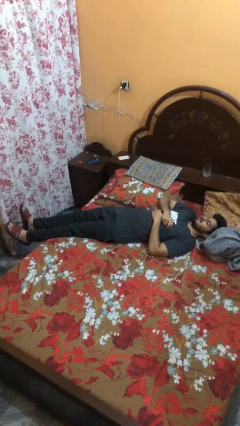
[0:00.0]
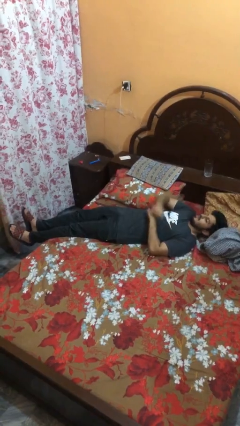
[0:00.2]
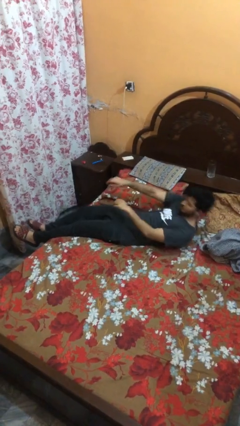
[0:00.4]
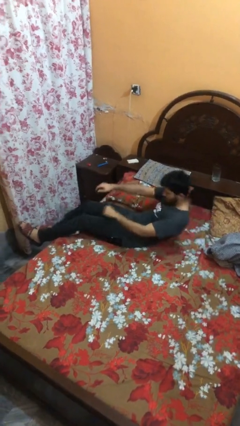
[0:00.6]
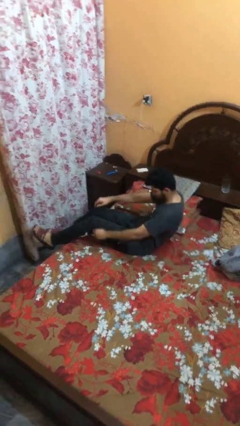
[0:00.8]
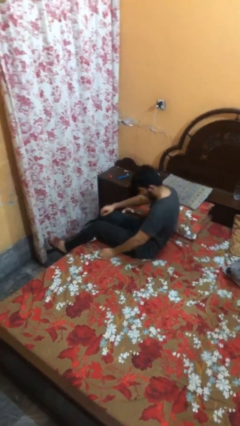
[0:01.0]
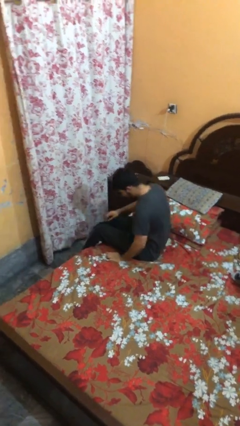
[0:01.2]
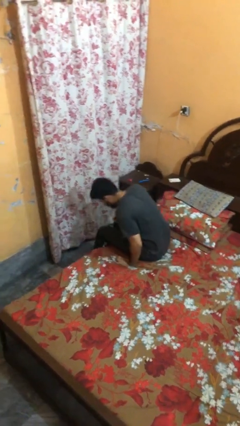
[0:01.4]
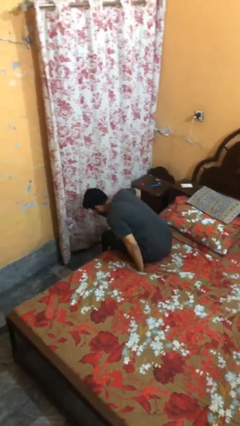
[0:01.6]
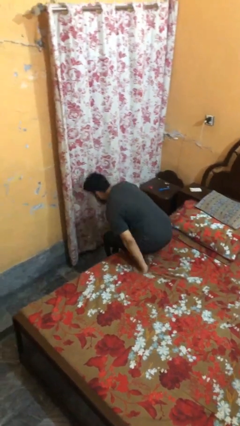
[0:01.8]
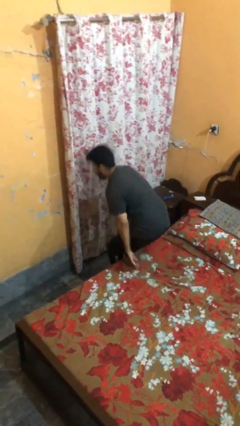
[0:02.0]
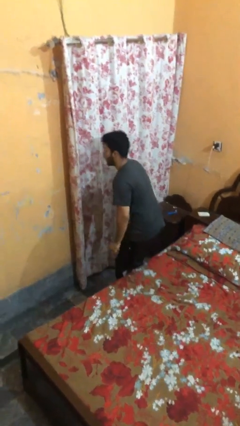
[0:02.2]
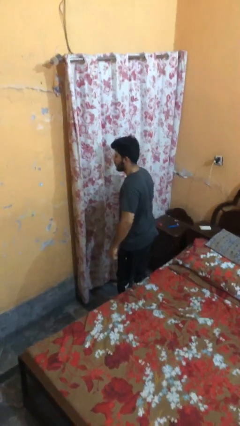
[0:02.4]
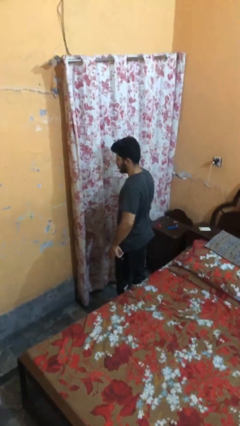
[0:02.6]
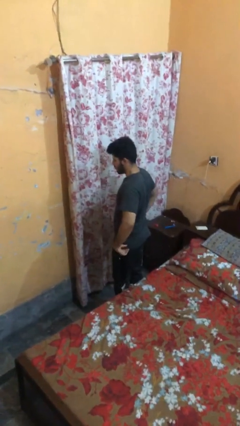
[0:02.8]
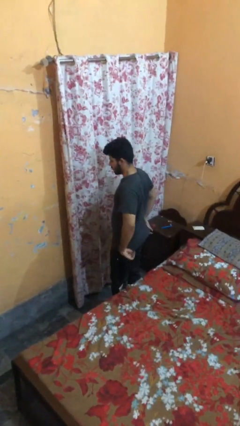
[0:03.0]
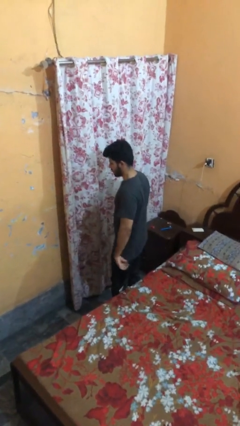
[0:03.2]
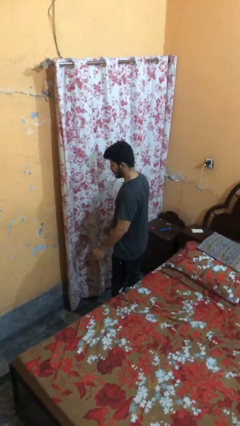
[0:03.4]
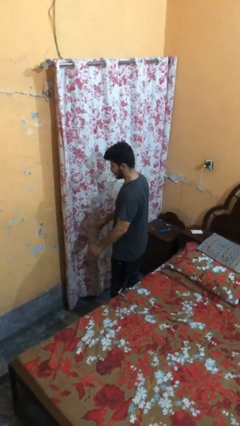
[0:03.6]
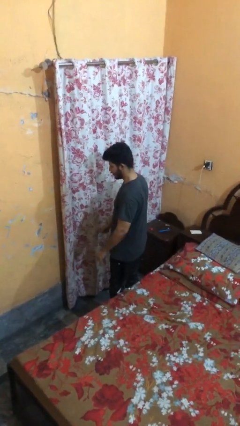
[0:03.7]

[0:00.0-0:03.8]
person stands up

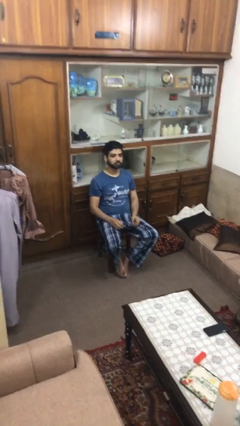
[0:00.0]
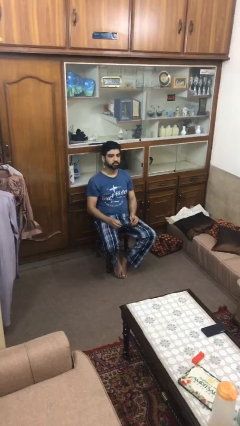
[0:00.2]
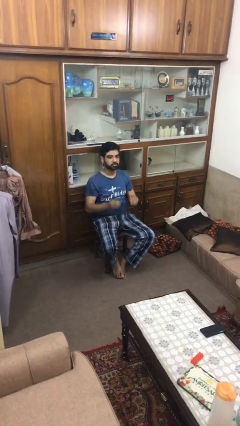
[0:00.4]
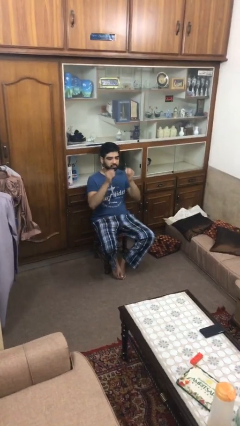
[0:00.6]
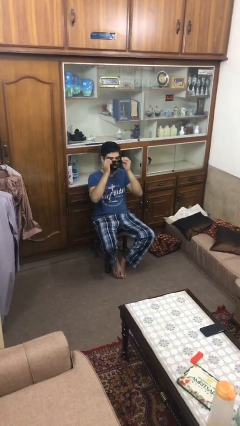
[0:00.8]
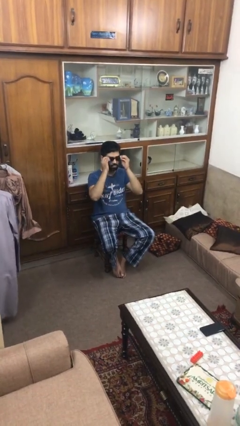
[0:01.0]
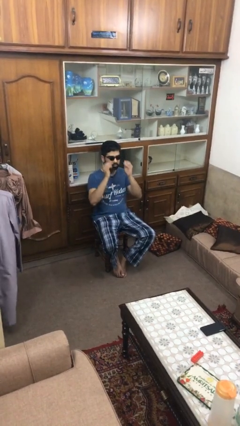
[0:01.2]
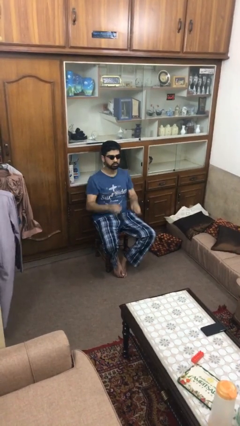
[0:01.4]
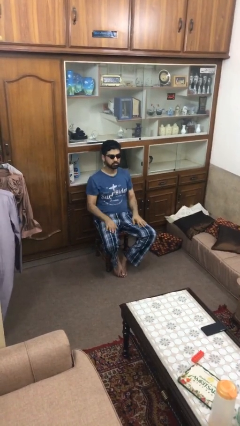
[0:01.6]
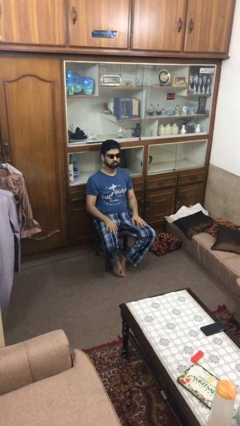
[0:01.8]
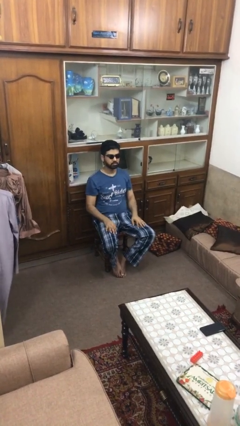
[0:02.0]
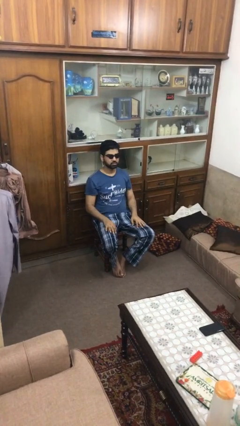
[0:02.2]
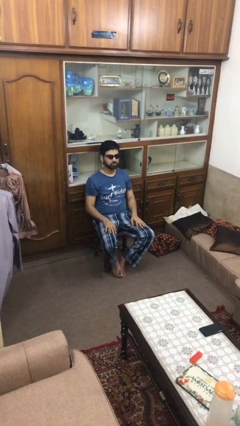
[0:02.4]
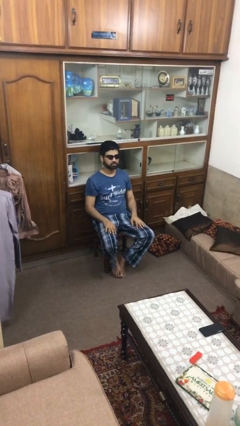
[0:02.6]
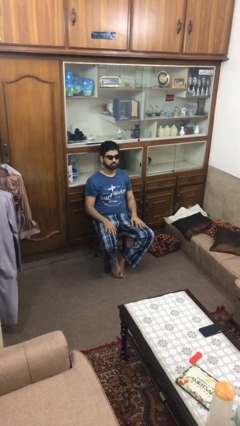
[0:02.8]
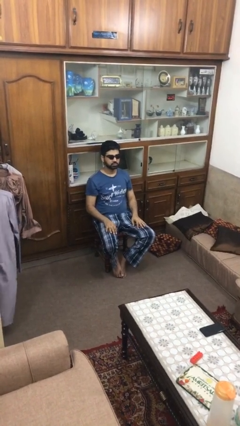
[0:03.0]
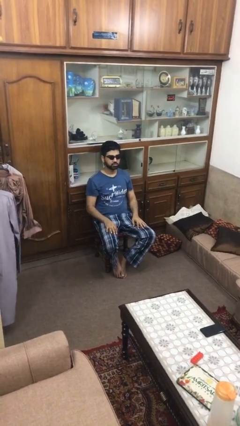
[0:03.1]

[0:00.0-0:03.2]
person puts on sunglasses

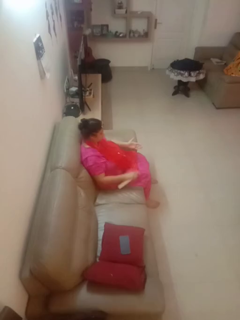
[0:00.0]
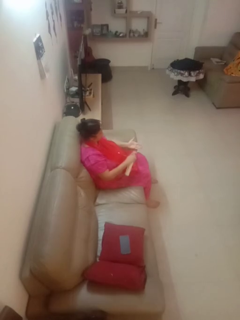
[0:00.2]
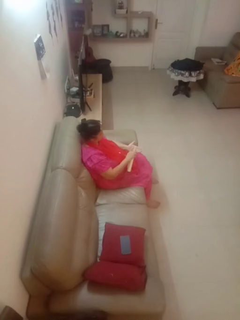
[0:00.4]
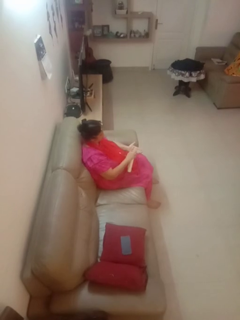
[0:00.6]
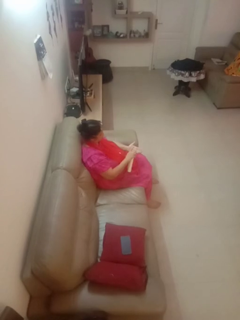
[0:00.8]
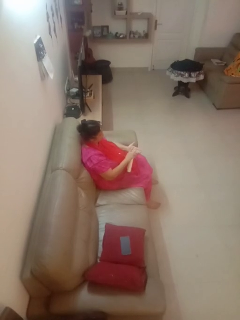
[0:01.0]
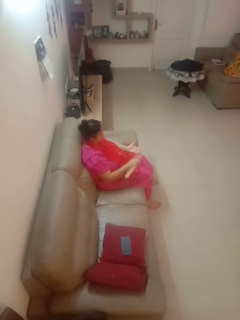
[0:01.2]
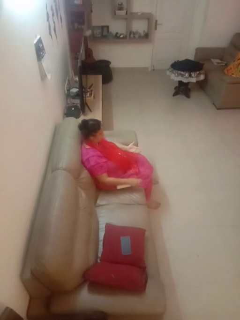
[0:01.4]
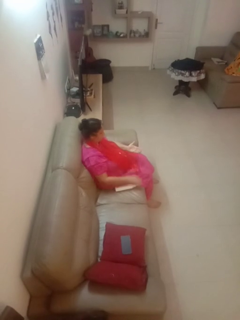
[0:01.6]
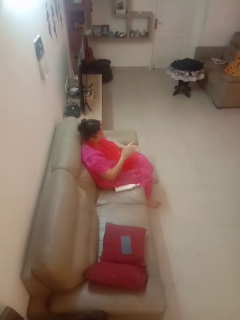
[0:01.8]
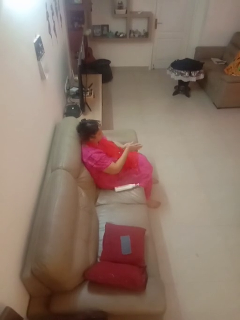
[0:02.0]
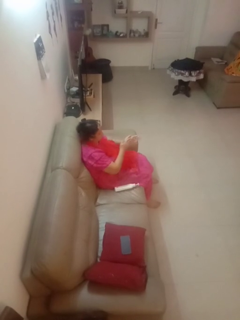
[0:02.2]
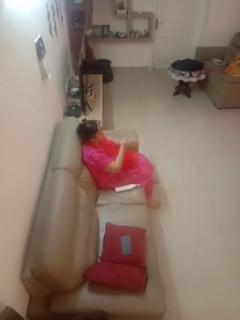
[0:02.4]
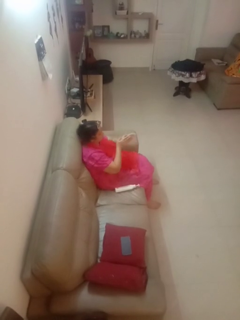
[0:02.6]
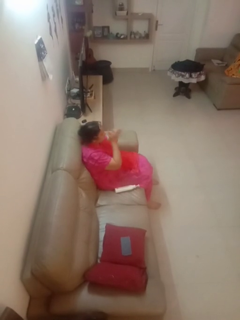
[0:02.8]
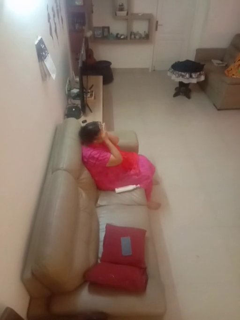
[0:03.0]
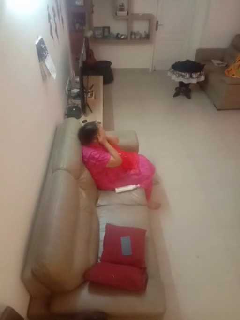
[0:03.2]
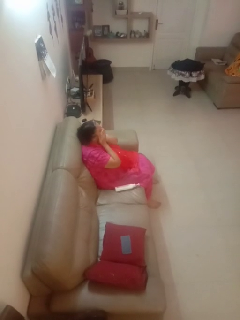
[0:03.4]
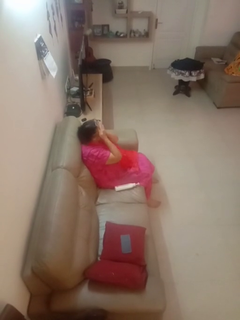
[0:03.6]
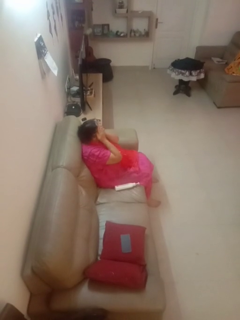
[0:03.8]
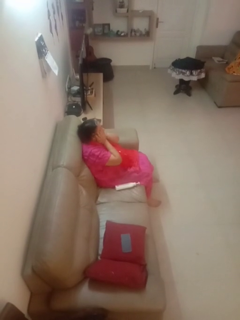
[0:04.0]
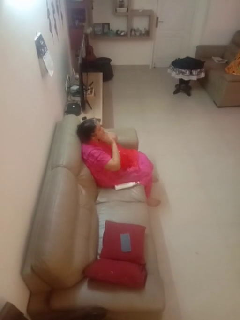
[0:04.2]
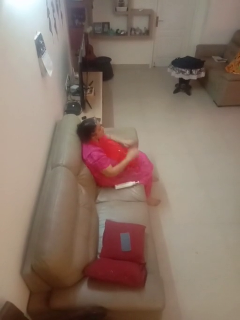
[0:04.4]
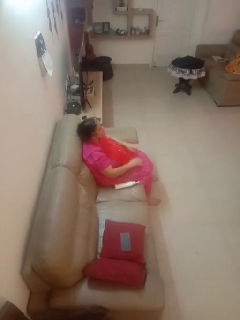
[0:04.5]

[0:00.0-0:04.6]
person applies sunscreen

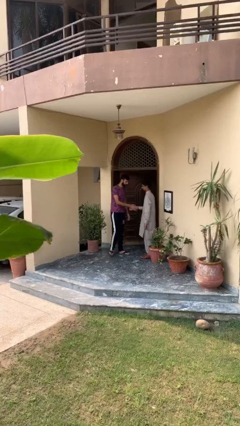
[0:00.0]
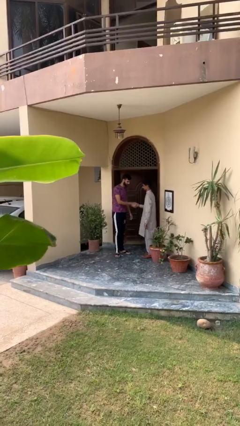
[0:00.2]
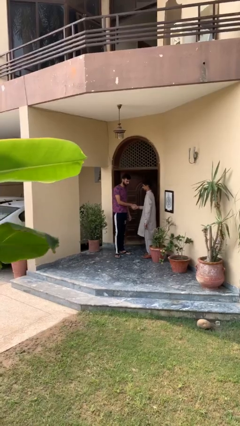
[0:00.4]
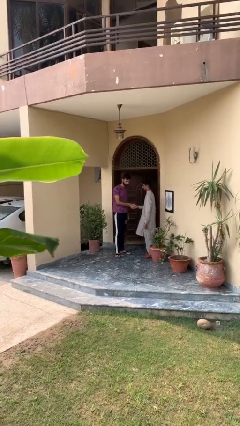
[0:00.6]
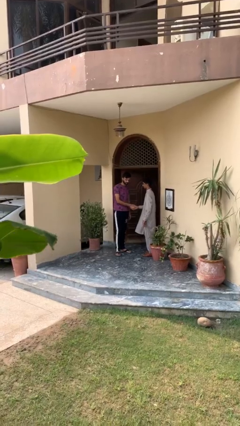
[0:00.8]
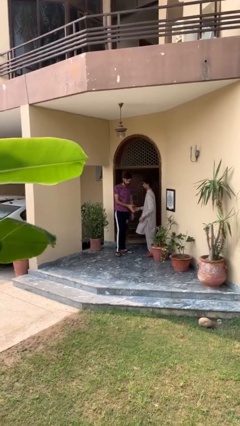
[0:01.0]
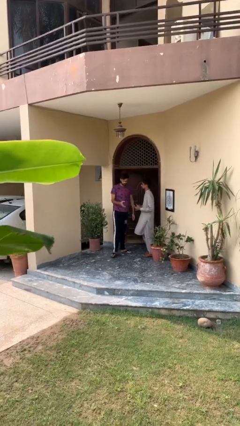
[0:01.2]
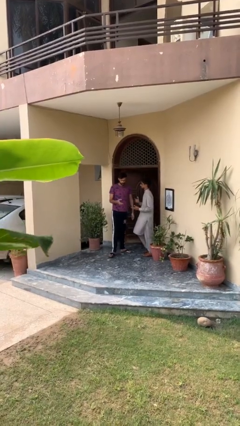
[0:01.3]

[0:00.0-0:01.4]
person shakes hand

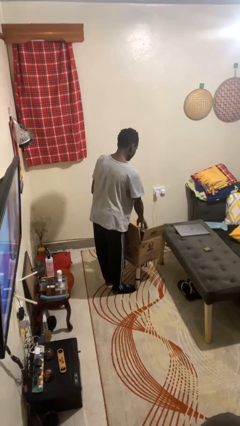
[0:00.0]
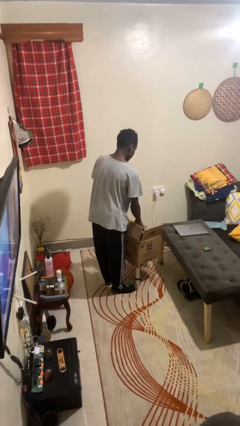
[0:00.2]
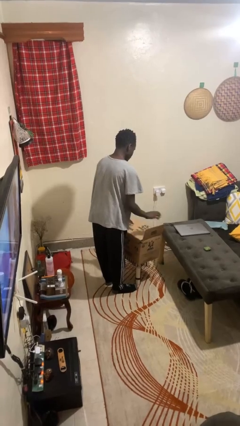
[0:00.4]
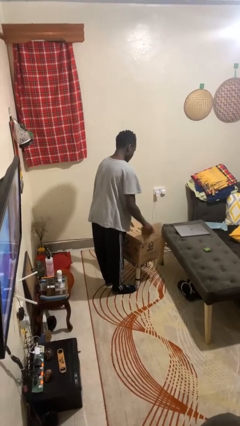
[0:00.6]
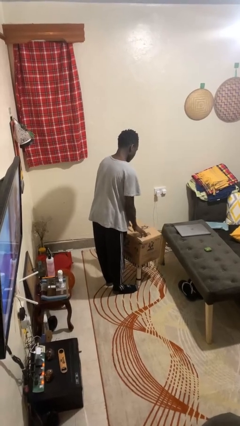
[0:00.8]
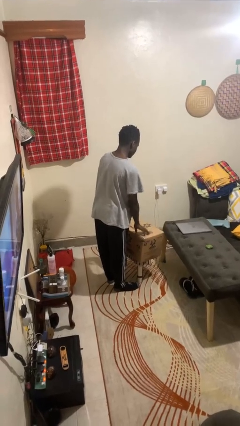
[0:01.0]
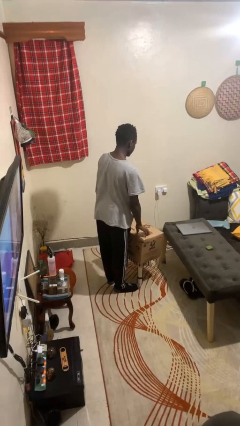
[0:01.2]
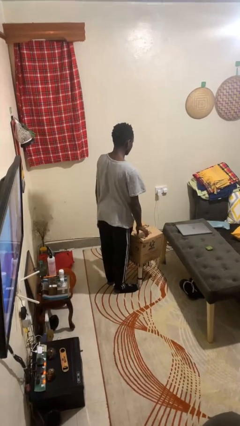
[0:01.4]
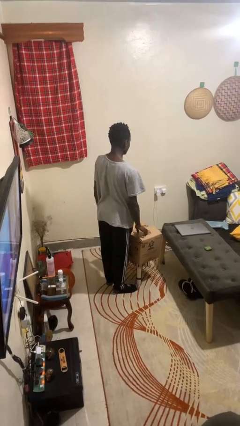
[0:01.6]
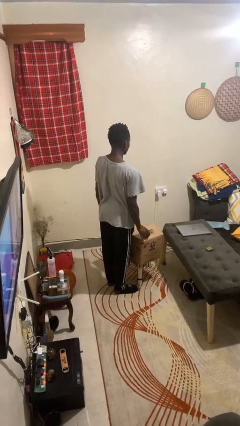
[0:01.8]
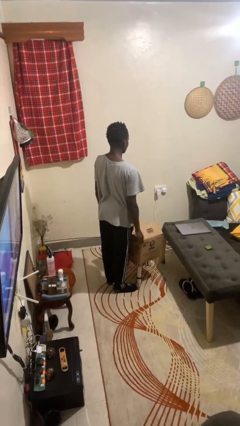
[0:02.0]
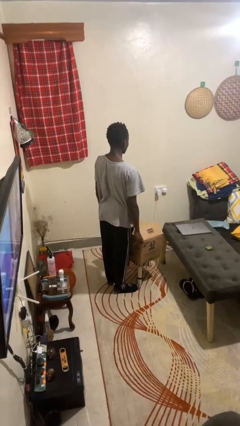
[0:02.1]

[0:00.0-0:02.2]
person closes box

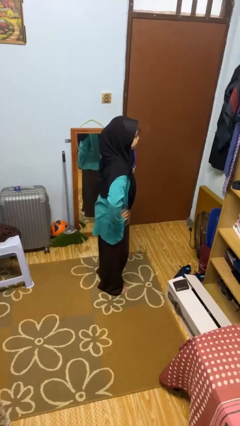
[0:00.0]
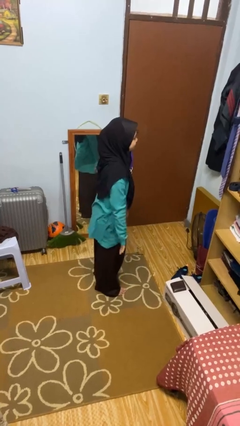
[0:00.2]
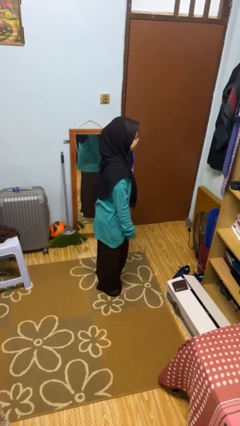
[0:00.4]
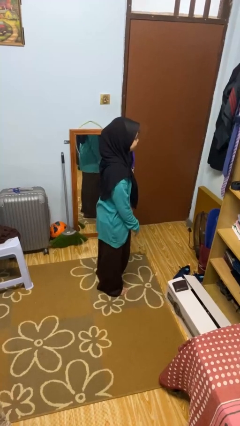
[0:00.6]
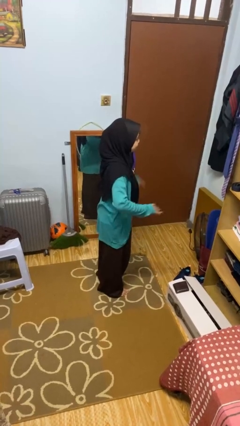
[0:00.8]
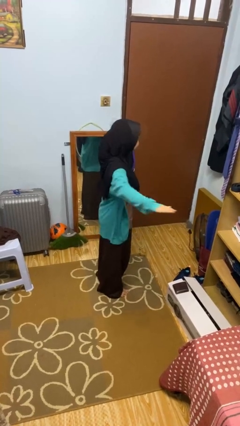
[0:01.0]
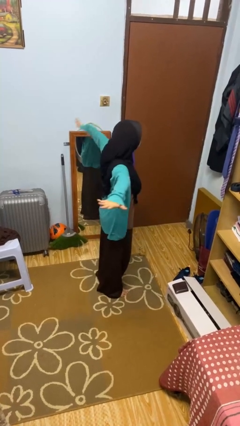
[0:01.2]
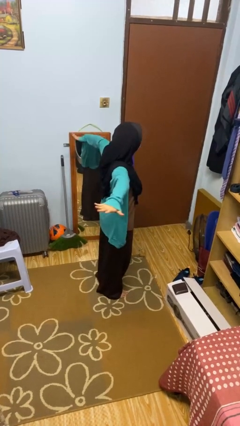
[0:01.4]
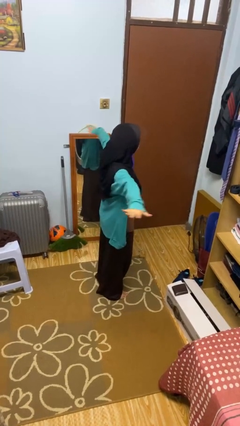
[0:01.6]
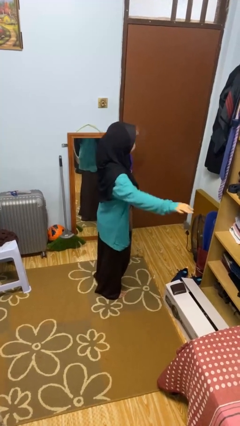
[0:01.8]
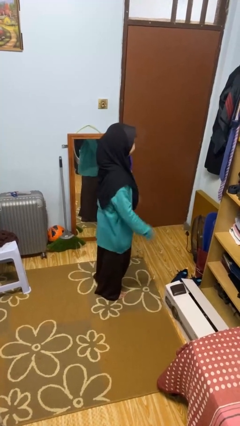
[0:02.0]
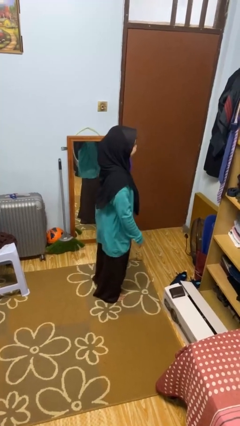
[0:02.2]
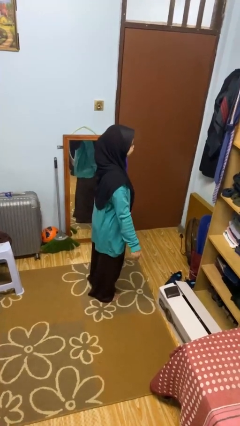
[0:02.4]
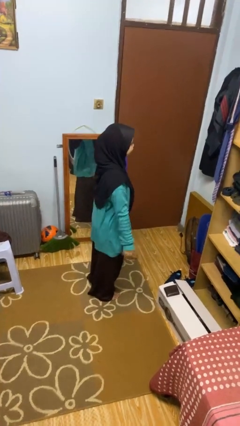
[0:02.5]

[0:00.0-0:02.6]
person stretches arms to side

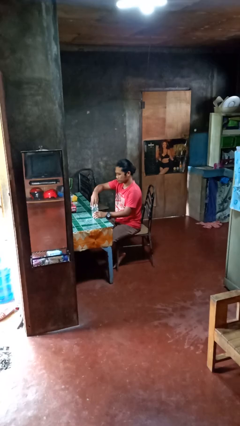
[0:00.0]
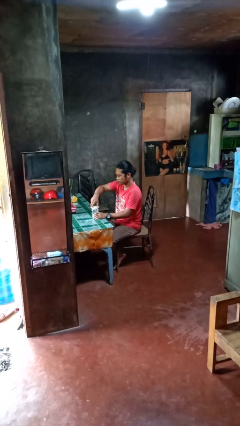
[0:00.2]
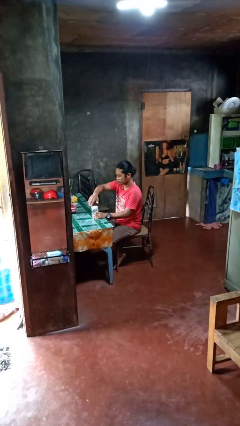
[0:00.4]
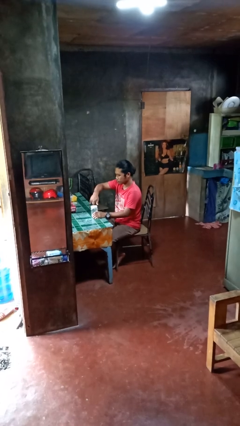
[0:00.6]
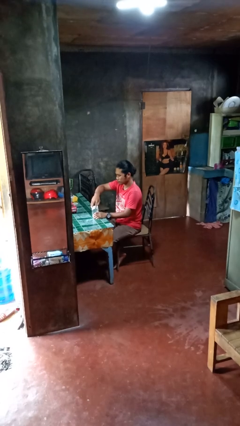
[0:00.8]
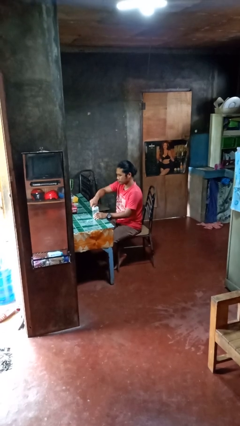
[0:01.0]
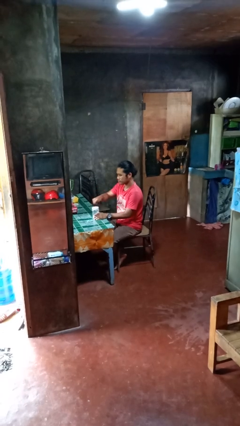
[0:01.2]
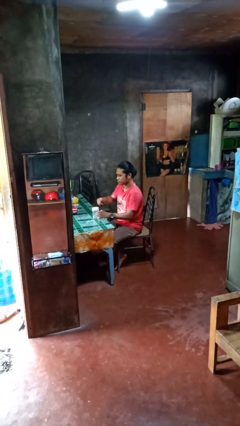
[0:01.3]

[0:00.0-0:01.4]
person closes jar
